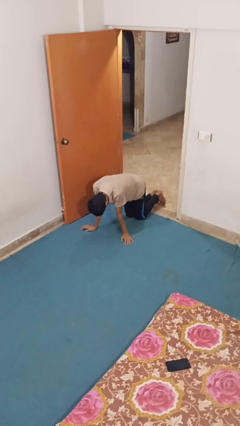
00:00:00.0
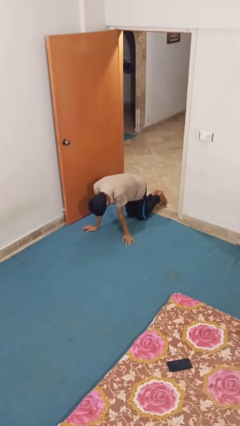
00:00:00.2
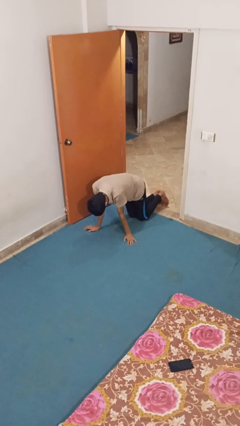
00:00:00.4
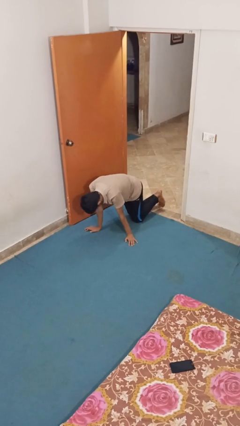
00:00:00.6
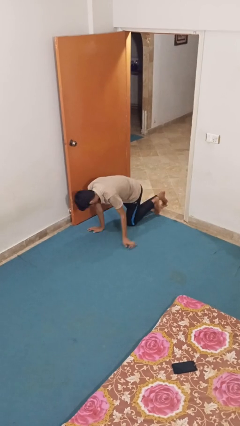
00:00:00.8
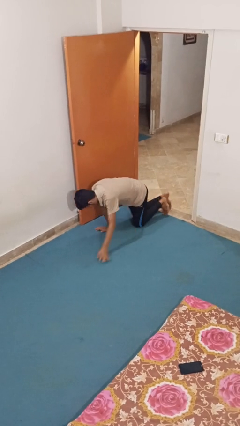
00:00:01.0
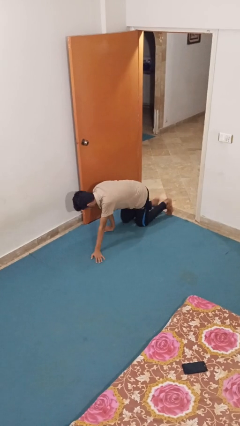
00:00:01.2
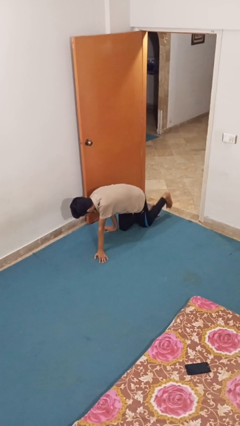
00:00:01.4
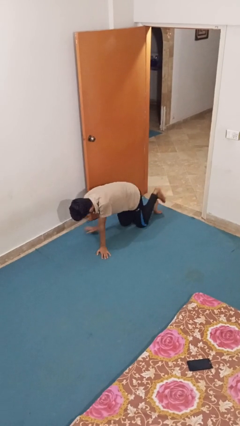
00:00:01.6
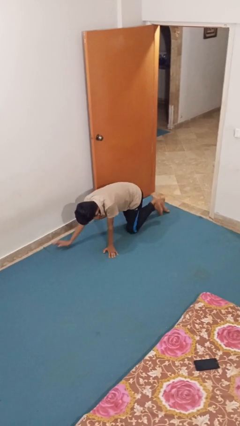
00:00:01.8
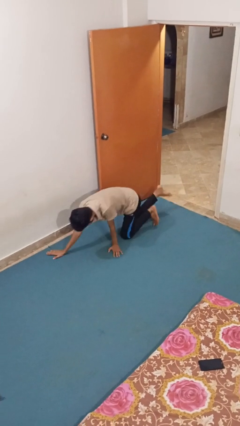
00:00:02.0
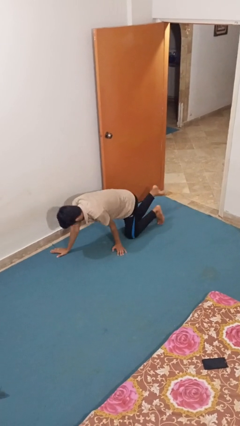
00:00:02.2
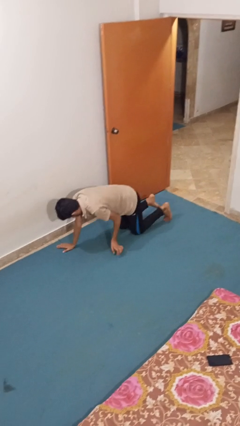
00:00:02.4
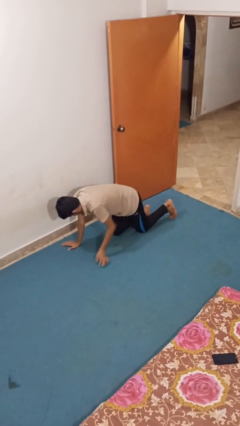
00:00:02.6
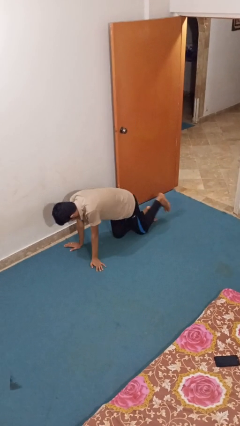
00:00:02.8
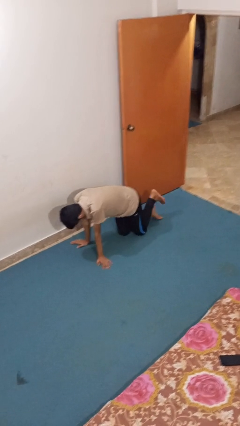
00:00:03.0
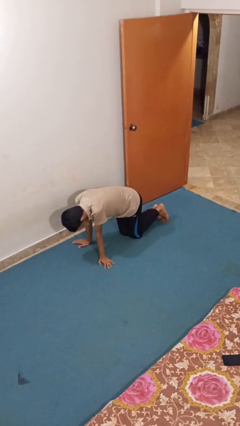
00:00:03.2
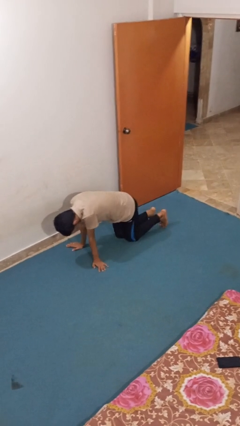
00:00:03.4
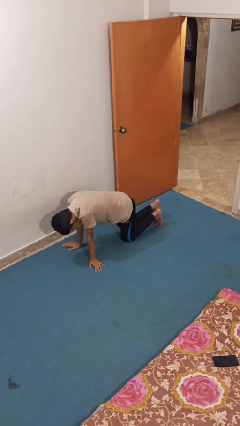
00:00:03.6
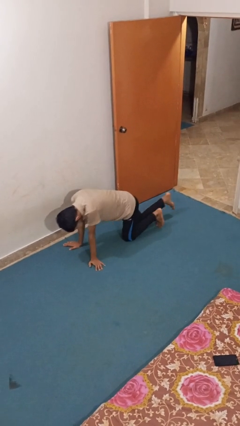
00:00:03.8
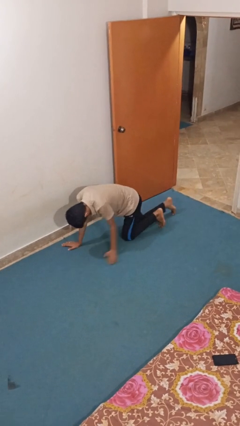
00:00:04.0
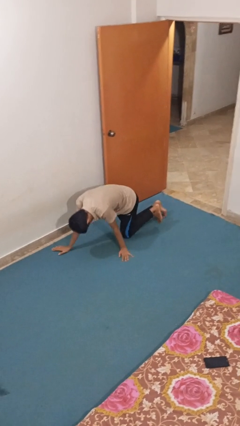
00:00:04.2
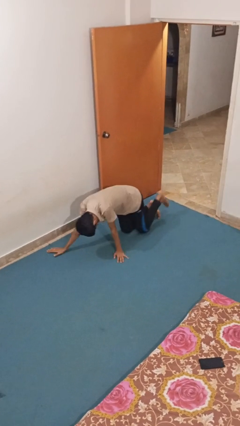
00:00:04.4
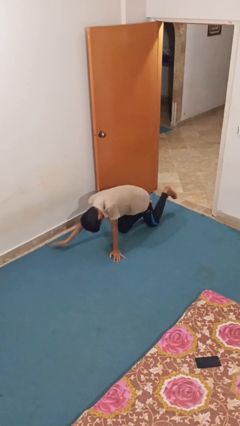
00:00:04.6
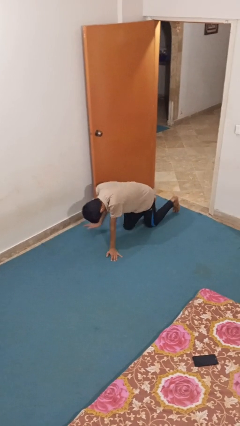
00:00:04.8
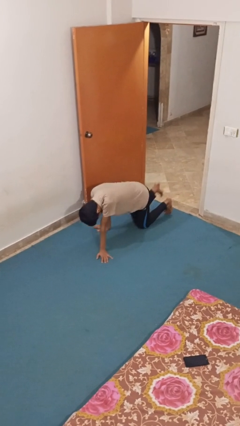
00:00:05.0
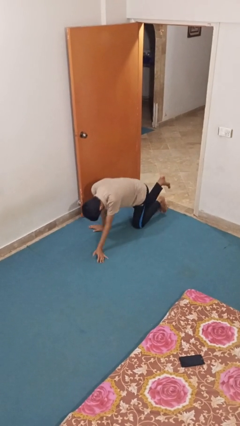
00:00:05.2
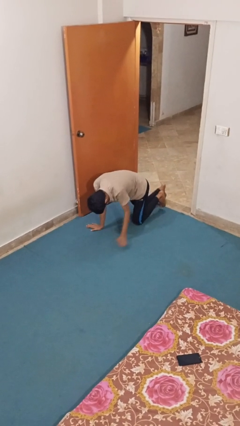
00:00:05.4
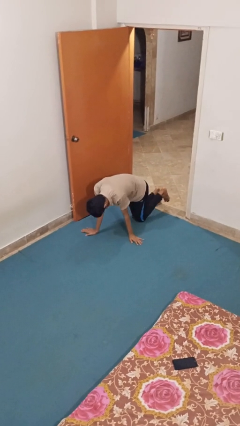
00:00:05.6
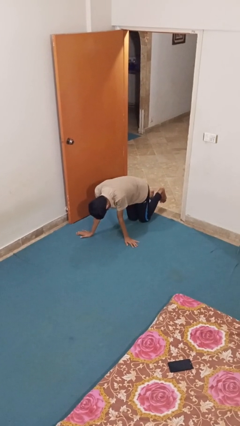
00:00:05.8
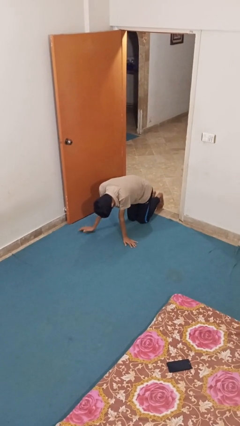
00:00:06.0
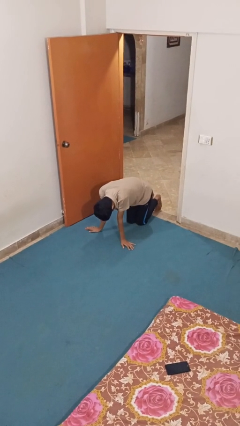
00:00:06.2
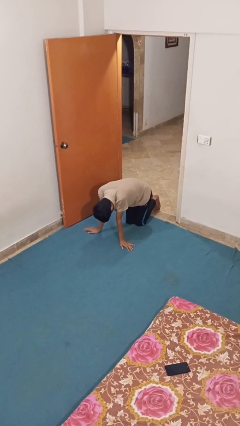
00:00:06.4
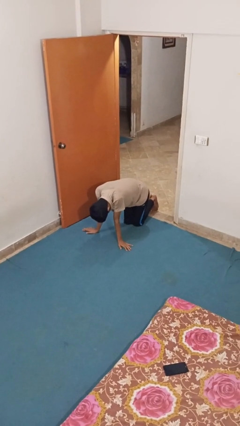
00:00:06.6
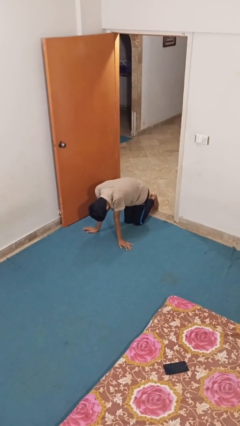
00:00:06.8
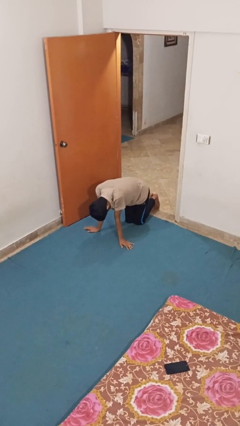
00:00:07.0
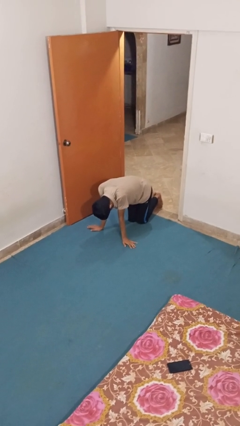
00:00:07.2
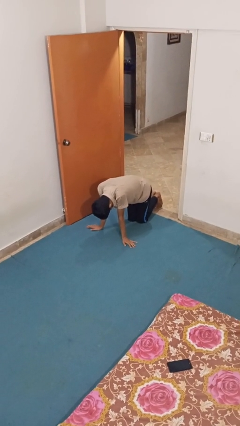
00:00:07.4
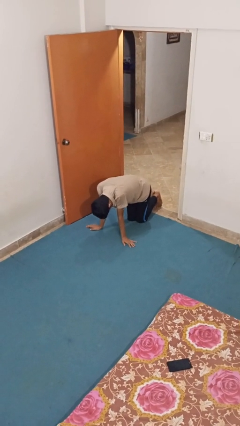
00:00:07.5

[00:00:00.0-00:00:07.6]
person crawls

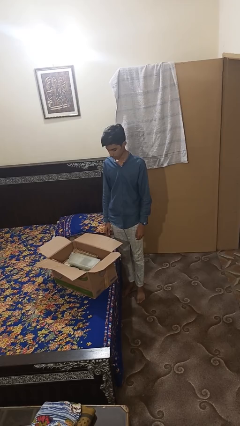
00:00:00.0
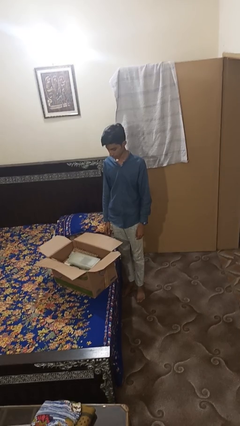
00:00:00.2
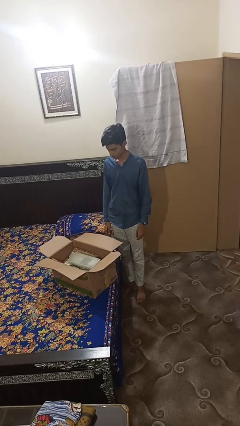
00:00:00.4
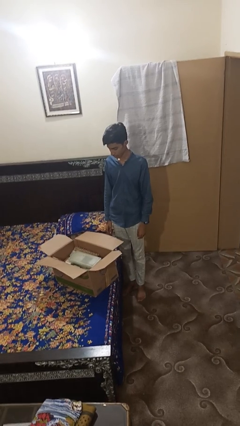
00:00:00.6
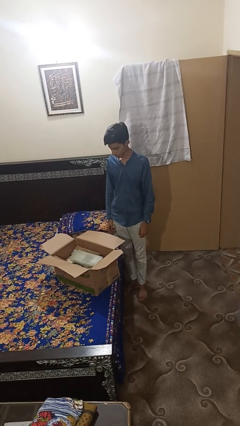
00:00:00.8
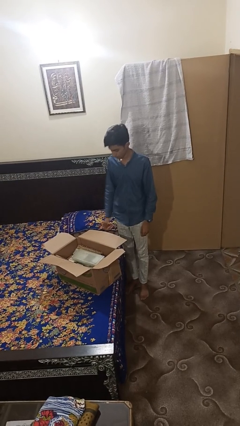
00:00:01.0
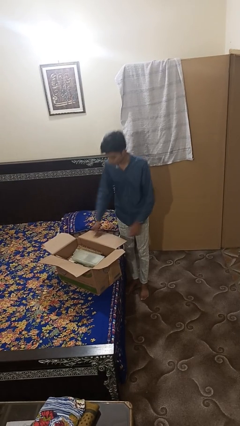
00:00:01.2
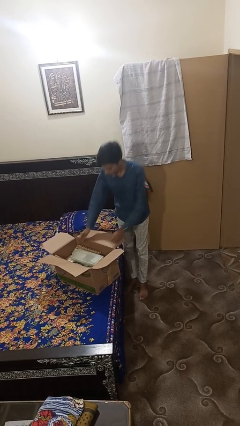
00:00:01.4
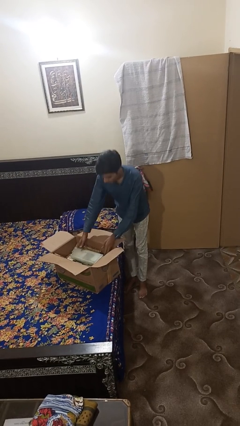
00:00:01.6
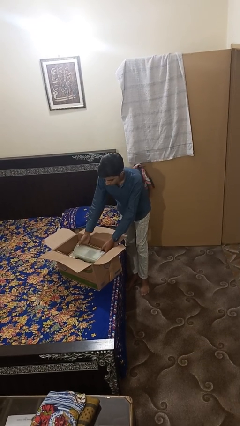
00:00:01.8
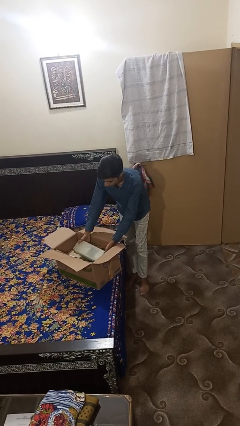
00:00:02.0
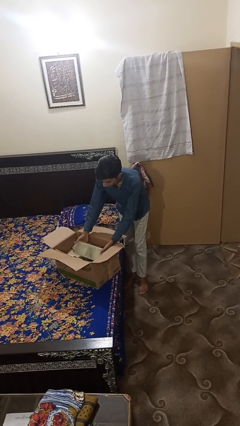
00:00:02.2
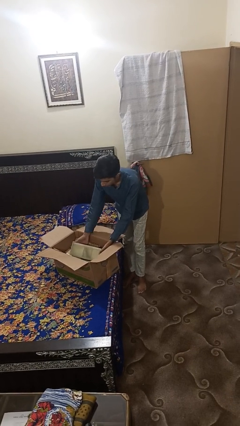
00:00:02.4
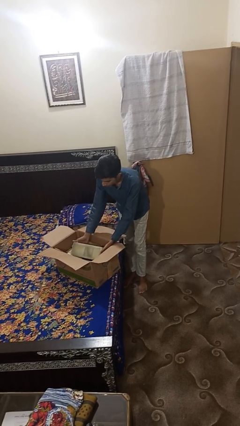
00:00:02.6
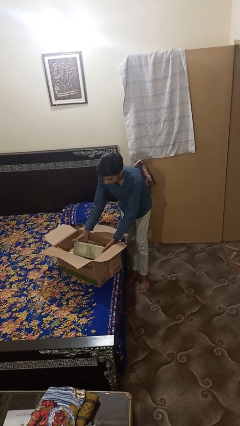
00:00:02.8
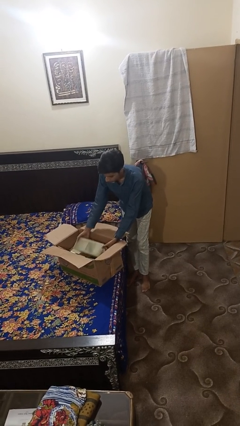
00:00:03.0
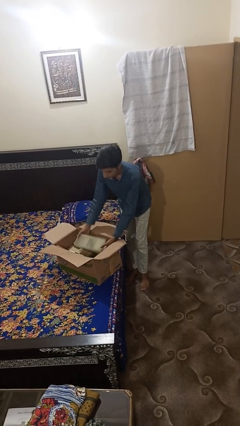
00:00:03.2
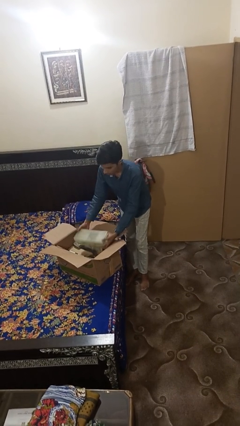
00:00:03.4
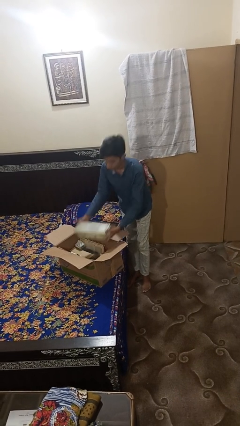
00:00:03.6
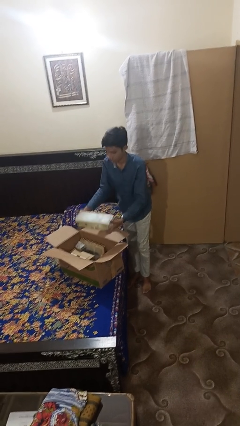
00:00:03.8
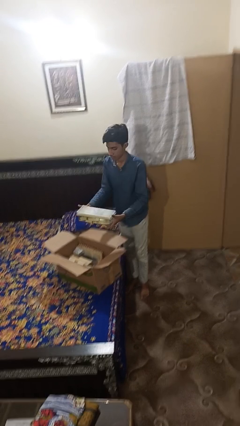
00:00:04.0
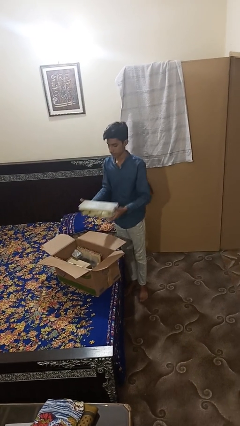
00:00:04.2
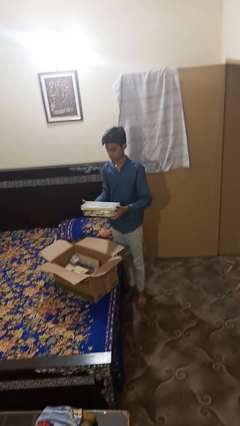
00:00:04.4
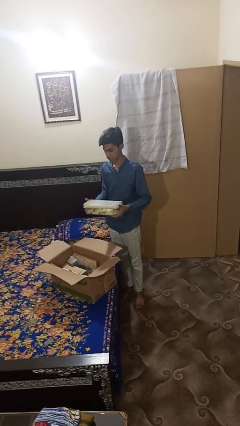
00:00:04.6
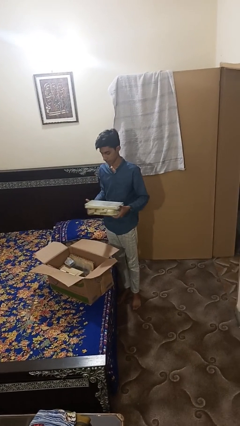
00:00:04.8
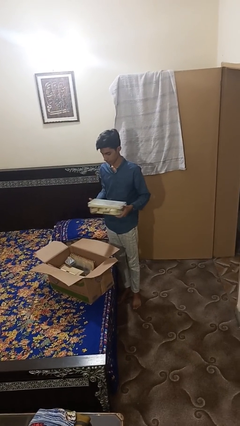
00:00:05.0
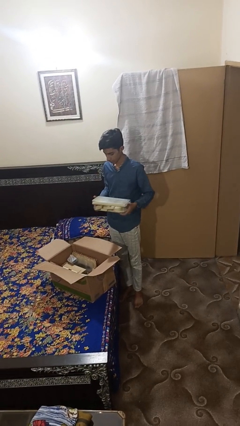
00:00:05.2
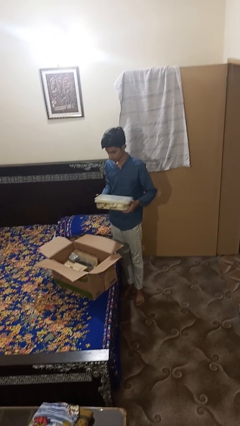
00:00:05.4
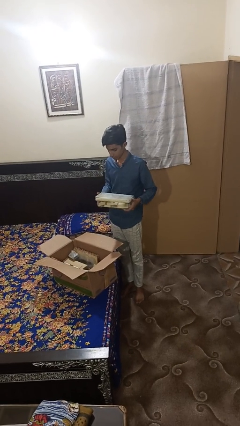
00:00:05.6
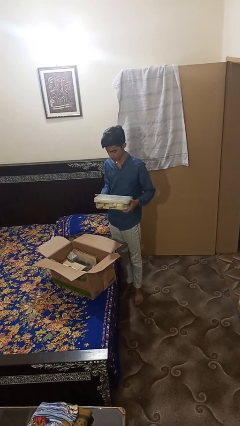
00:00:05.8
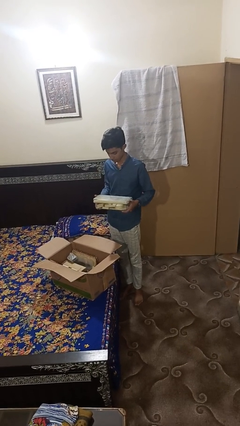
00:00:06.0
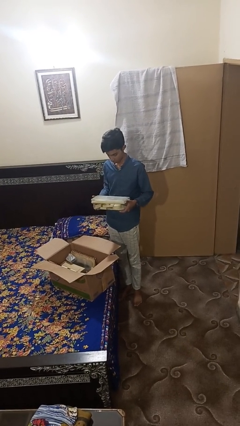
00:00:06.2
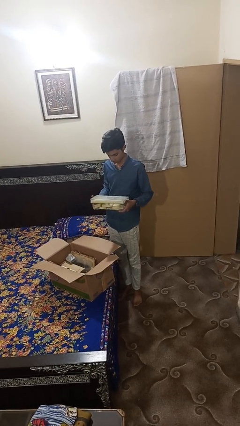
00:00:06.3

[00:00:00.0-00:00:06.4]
person takes object from box

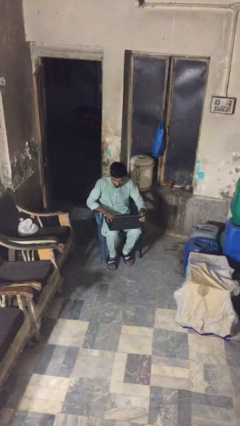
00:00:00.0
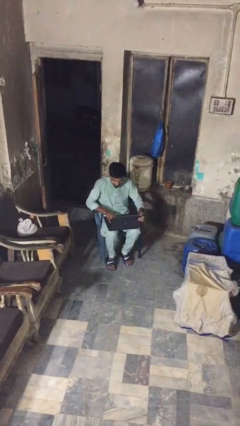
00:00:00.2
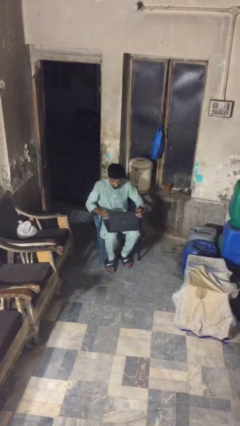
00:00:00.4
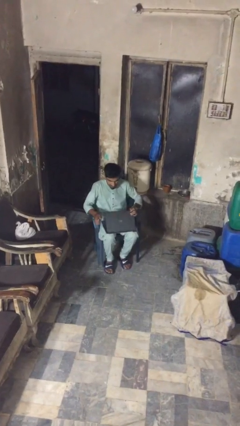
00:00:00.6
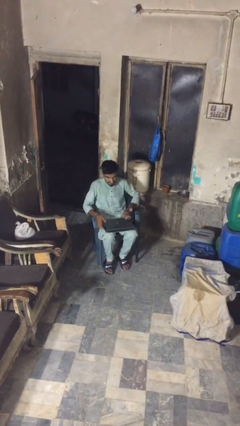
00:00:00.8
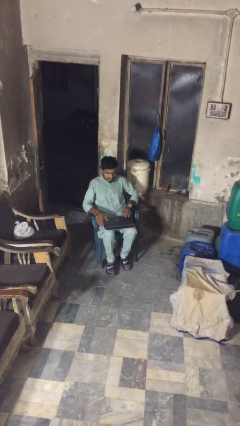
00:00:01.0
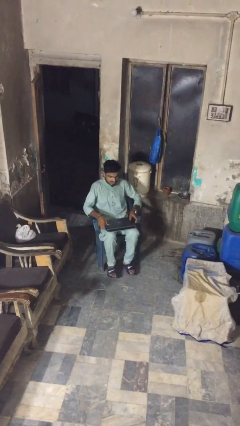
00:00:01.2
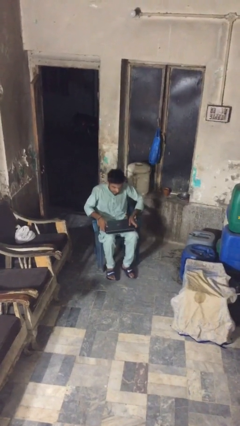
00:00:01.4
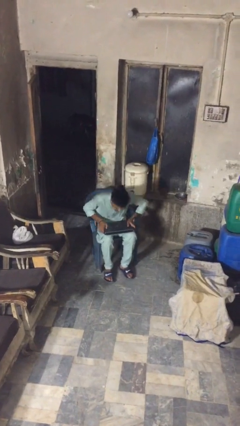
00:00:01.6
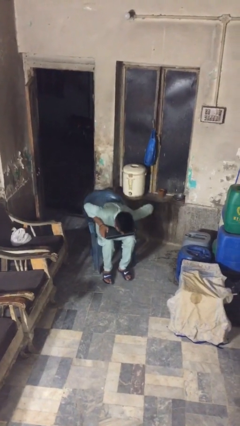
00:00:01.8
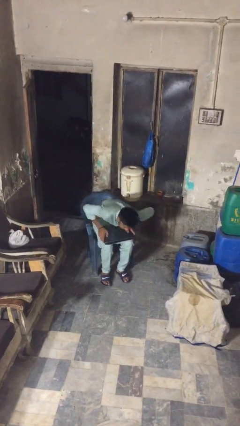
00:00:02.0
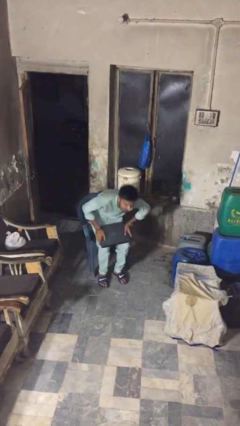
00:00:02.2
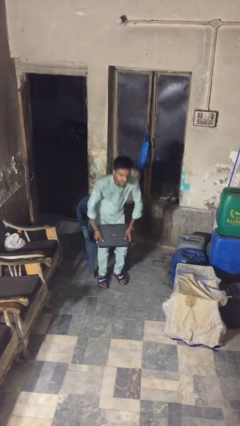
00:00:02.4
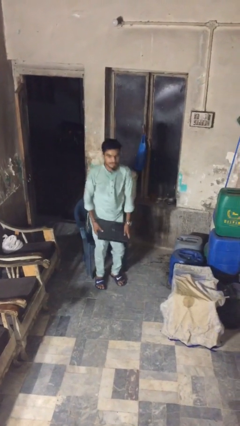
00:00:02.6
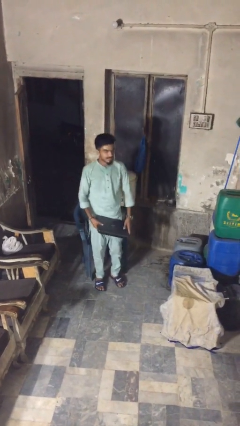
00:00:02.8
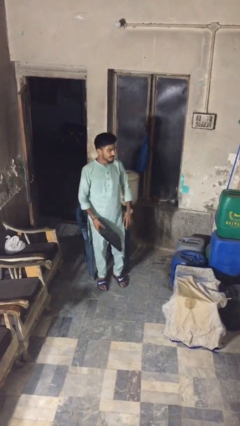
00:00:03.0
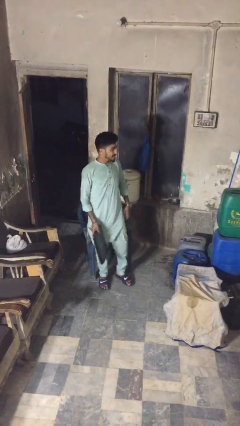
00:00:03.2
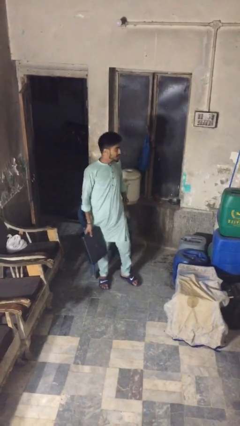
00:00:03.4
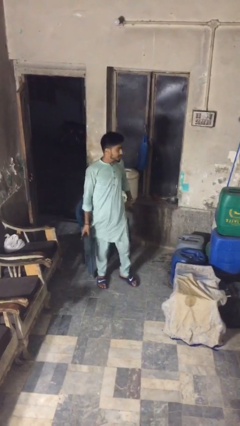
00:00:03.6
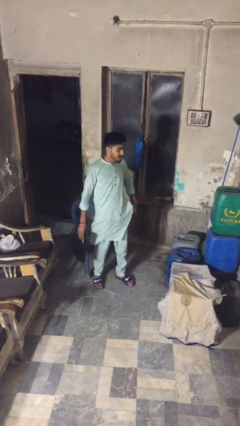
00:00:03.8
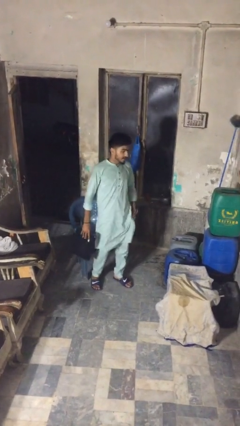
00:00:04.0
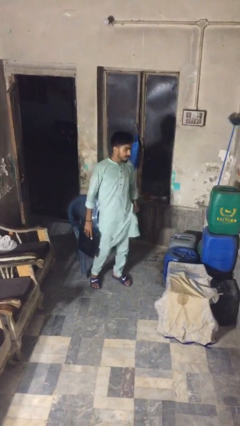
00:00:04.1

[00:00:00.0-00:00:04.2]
person stands up
